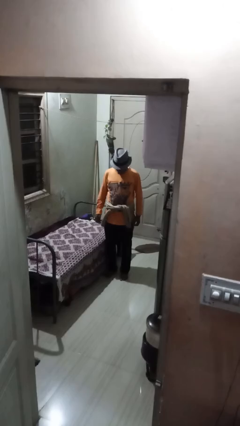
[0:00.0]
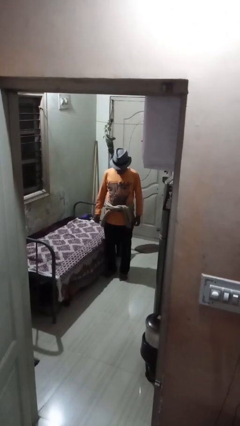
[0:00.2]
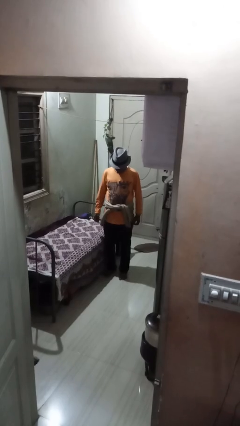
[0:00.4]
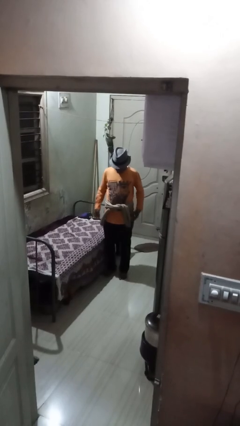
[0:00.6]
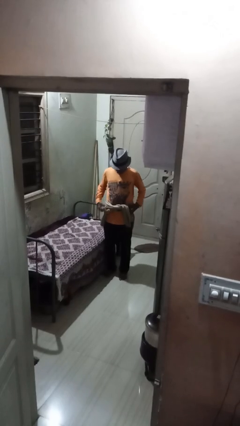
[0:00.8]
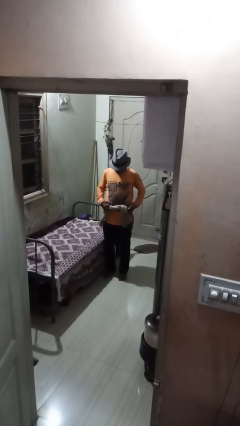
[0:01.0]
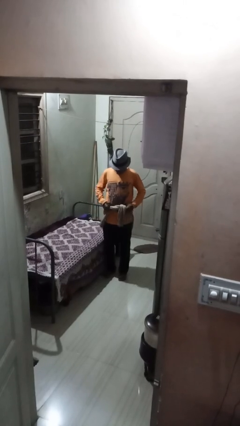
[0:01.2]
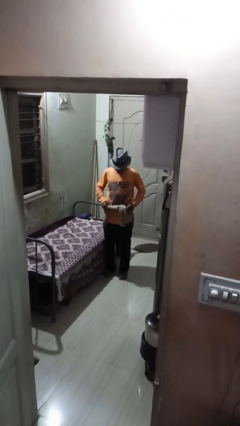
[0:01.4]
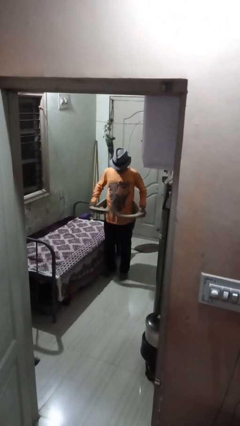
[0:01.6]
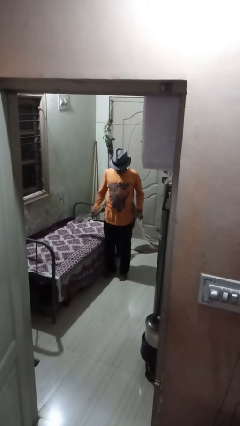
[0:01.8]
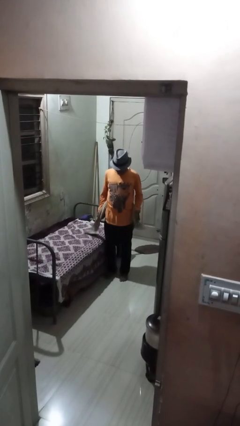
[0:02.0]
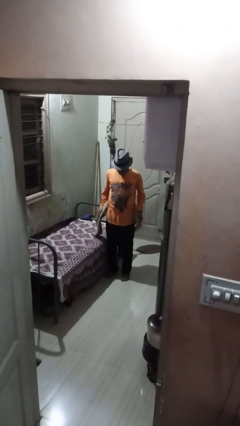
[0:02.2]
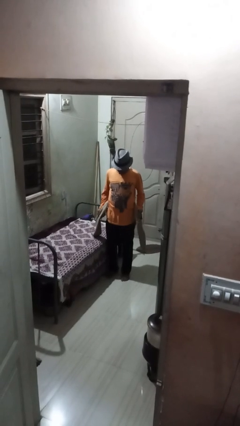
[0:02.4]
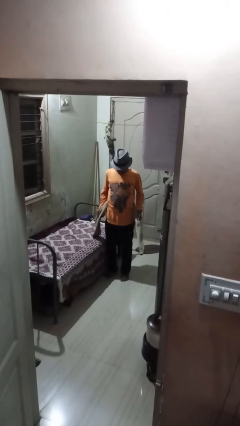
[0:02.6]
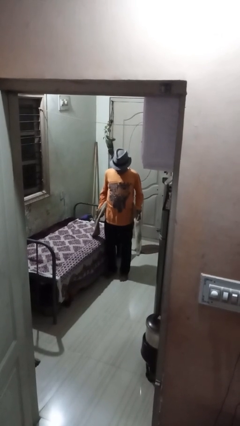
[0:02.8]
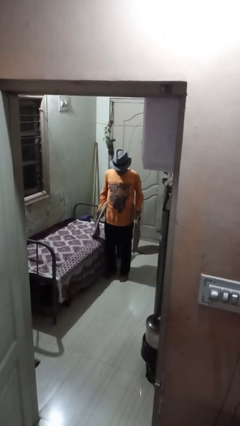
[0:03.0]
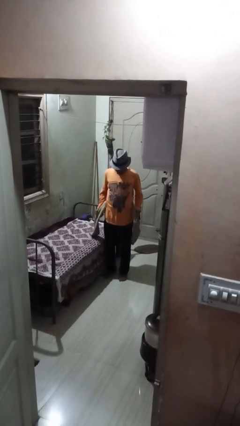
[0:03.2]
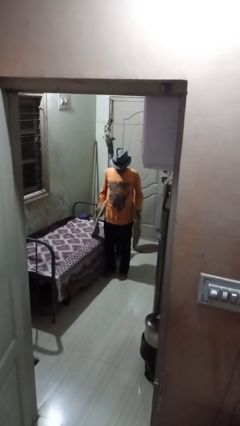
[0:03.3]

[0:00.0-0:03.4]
person unties jacket around waist

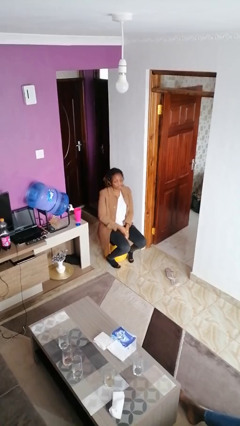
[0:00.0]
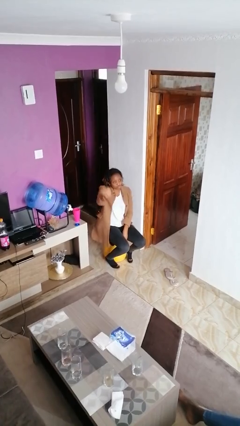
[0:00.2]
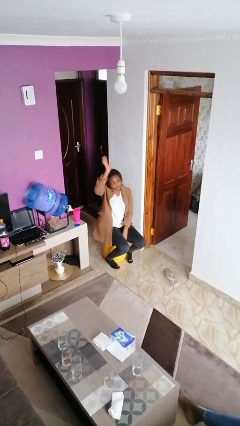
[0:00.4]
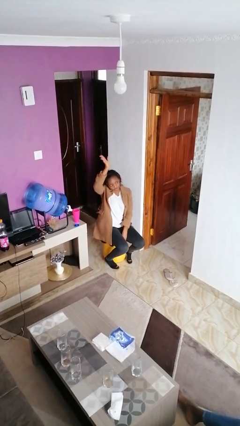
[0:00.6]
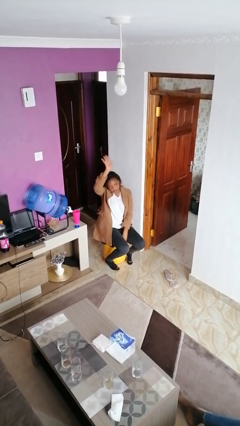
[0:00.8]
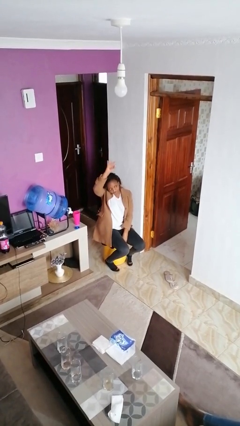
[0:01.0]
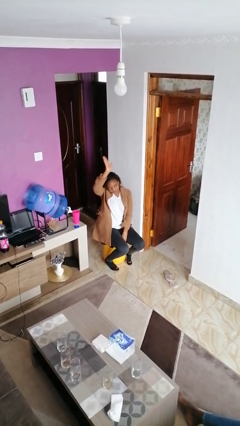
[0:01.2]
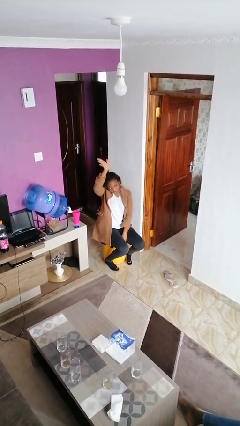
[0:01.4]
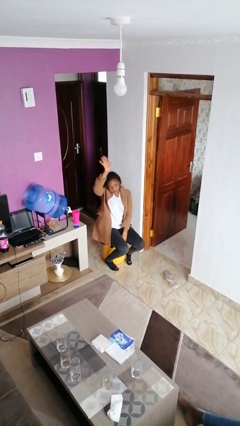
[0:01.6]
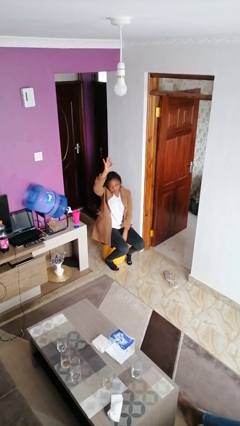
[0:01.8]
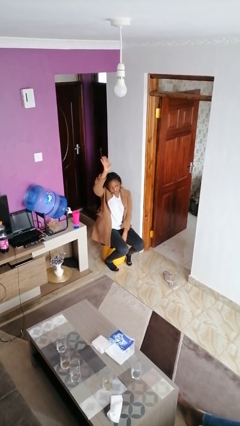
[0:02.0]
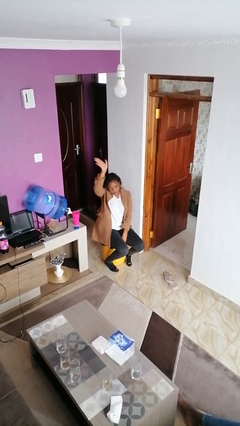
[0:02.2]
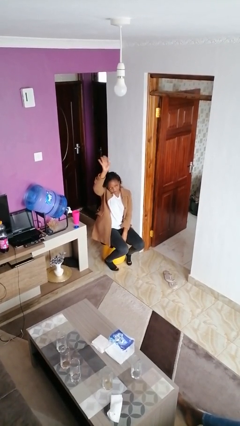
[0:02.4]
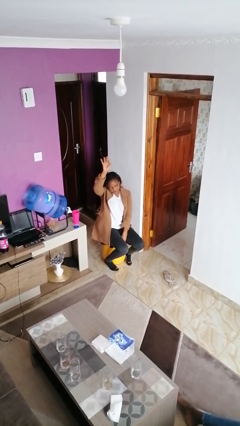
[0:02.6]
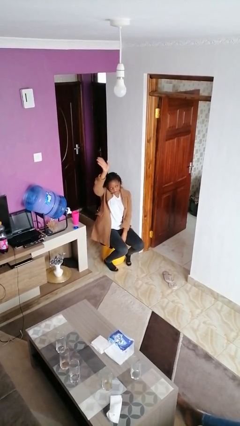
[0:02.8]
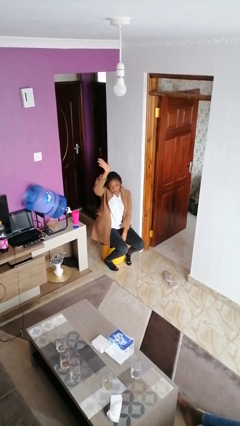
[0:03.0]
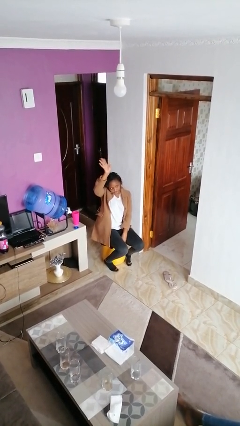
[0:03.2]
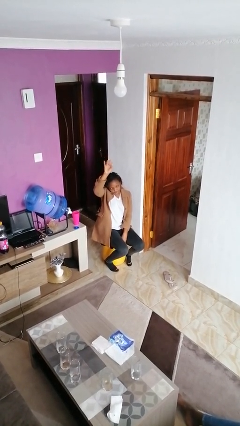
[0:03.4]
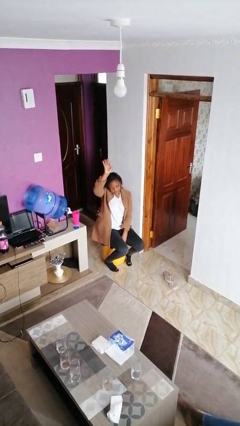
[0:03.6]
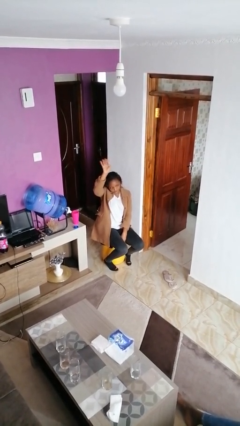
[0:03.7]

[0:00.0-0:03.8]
person gestures raise hand

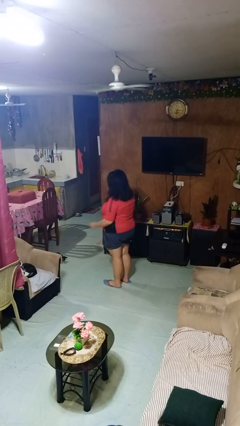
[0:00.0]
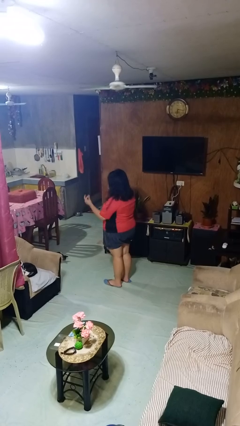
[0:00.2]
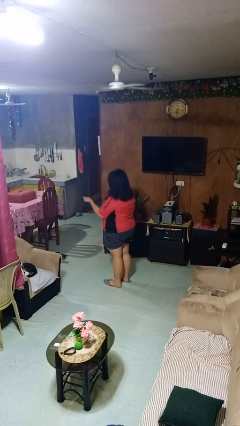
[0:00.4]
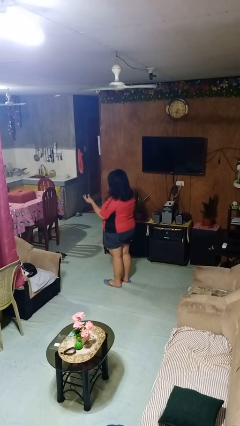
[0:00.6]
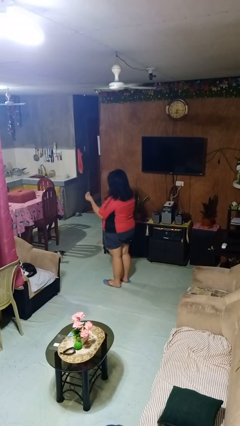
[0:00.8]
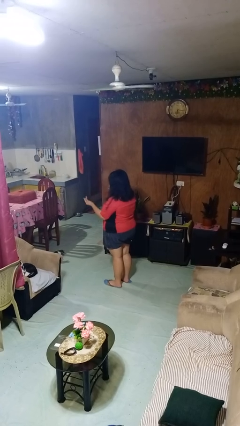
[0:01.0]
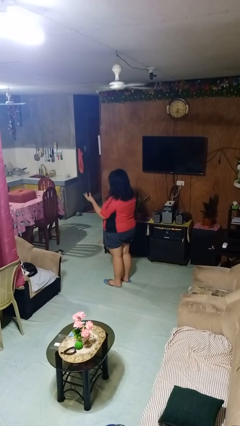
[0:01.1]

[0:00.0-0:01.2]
person snaps fingers

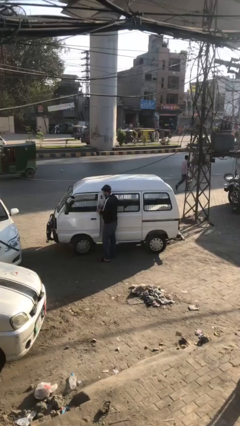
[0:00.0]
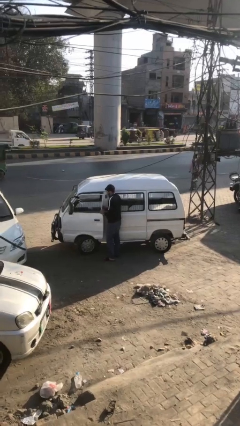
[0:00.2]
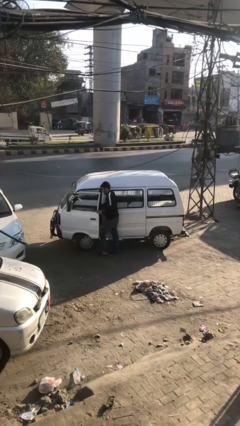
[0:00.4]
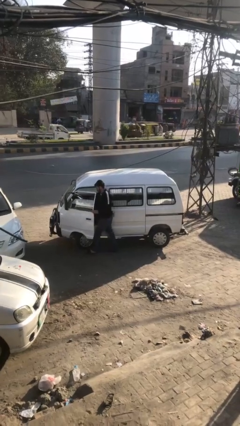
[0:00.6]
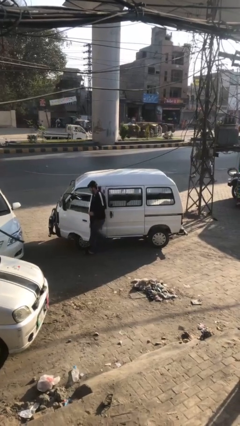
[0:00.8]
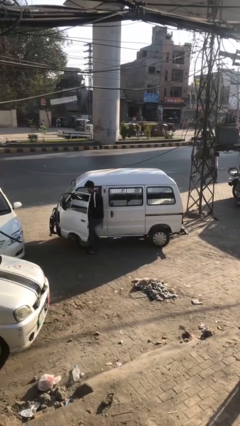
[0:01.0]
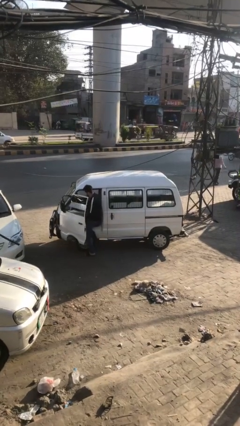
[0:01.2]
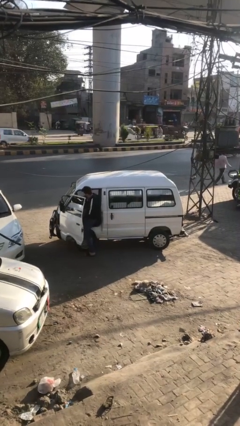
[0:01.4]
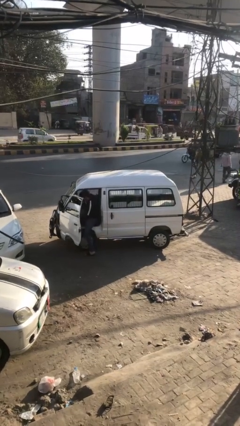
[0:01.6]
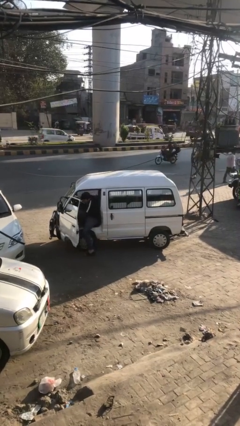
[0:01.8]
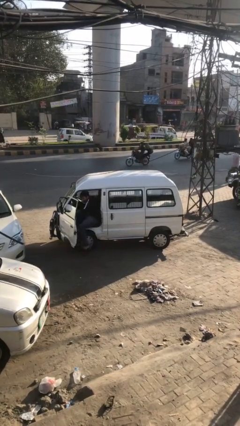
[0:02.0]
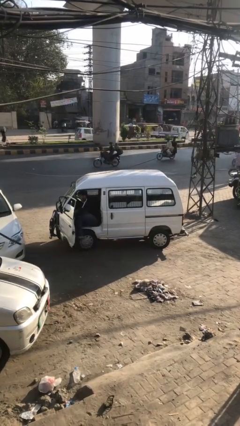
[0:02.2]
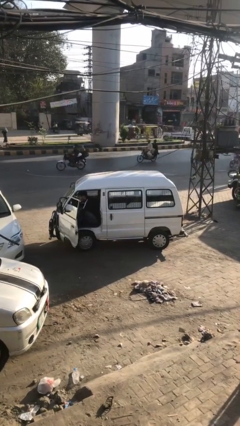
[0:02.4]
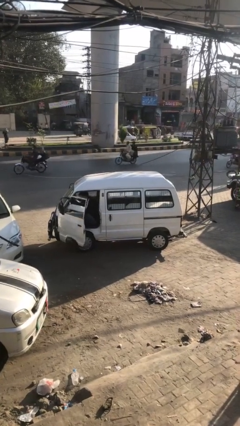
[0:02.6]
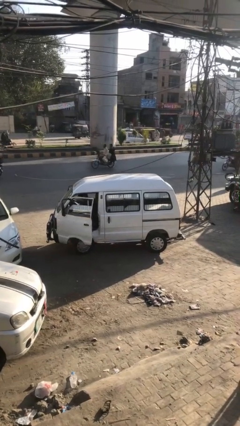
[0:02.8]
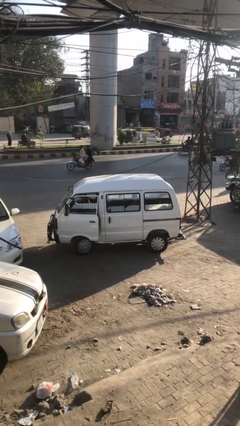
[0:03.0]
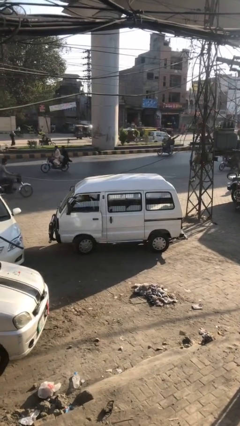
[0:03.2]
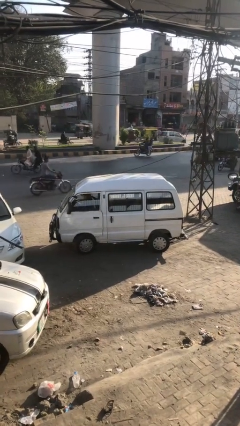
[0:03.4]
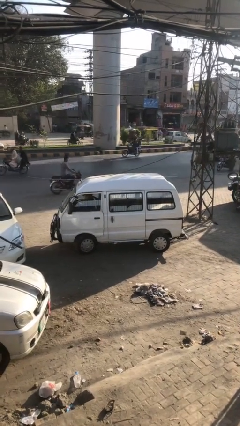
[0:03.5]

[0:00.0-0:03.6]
car picks up person

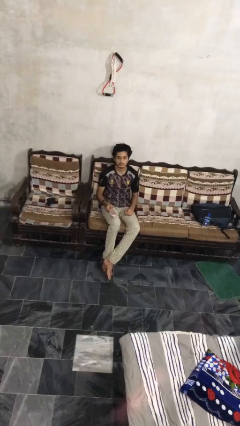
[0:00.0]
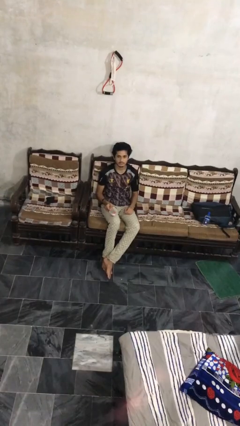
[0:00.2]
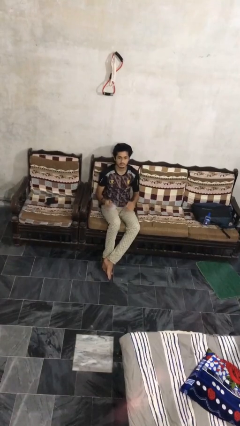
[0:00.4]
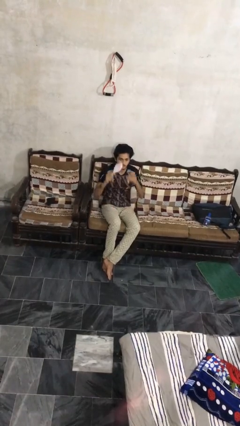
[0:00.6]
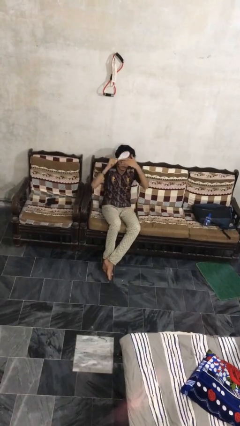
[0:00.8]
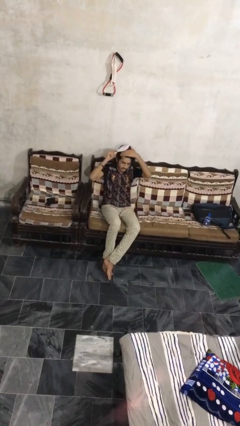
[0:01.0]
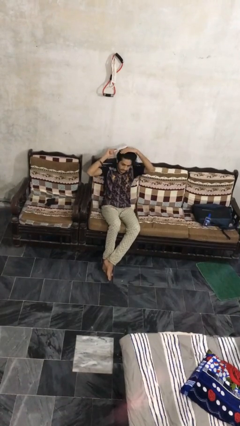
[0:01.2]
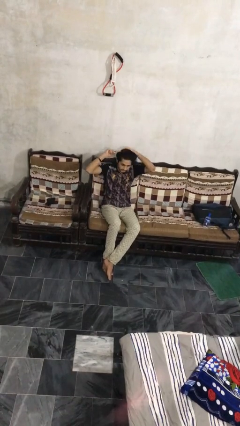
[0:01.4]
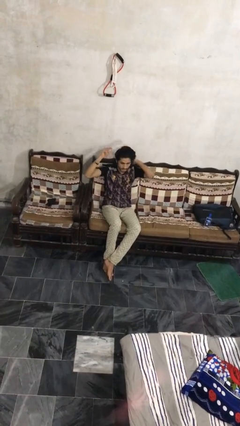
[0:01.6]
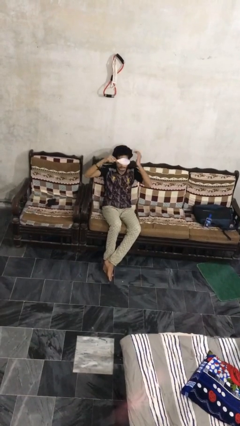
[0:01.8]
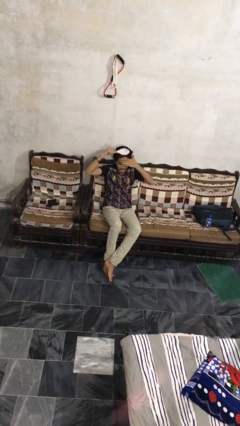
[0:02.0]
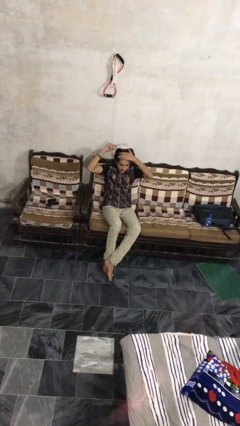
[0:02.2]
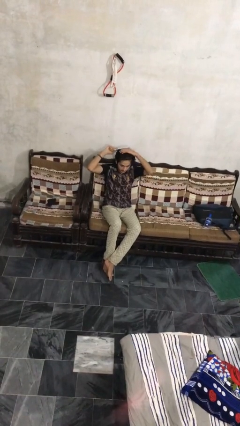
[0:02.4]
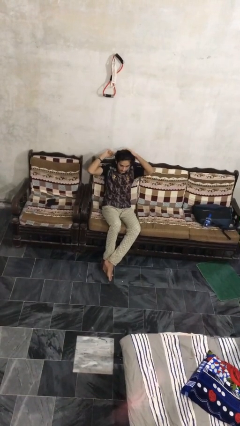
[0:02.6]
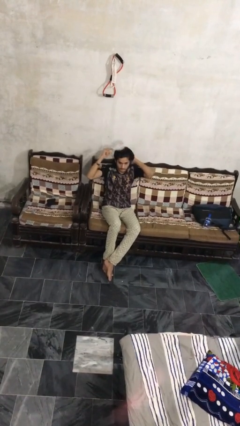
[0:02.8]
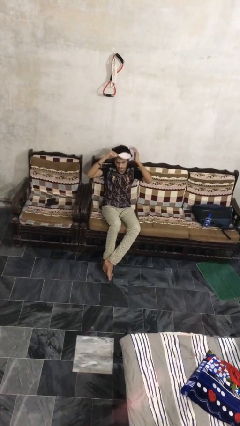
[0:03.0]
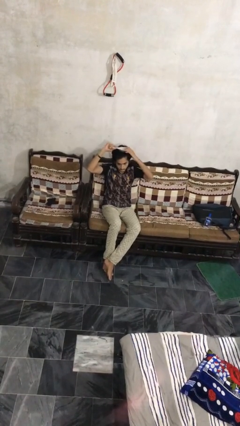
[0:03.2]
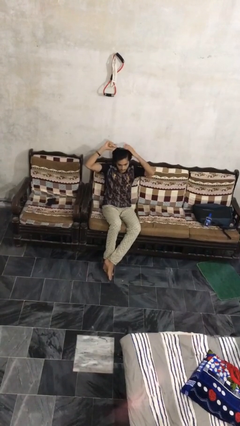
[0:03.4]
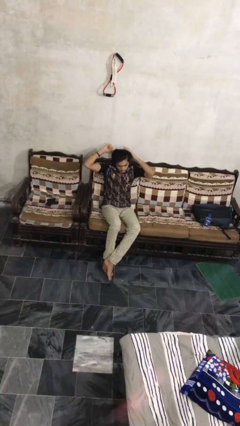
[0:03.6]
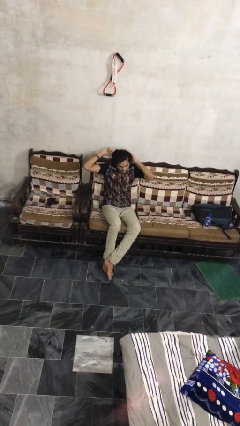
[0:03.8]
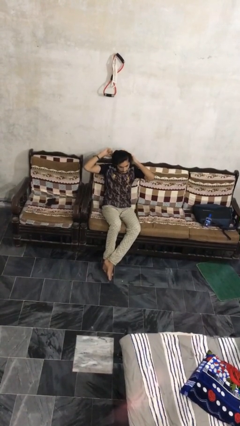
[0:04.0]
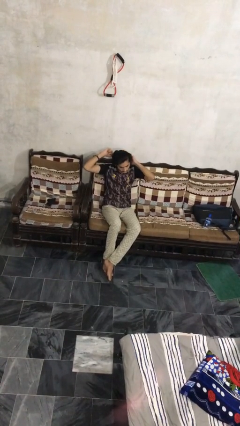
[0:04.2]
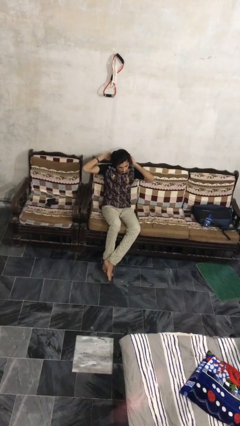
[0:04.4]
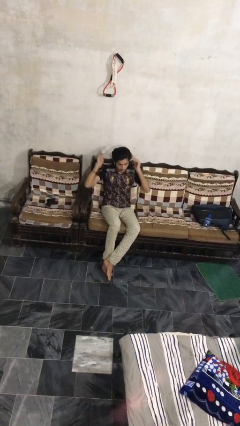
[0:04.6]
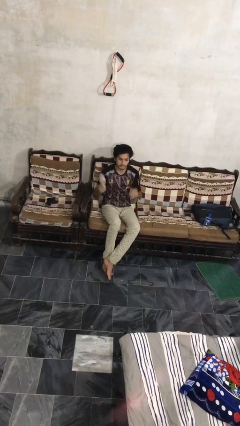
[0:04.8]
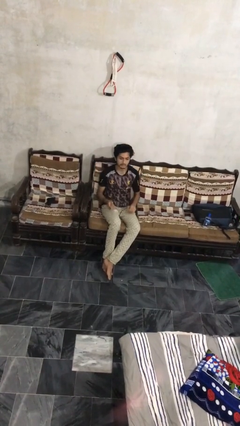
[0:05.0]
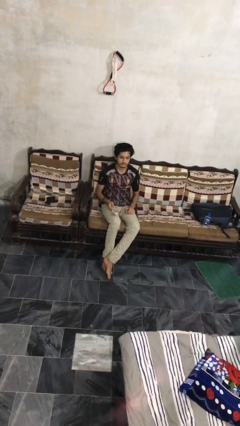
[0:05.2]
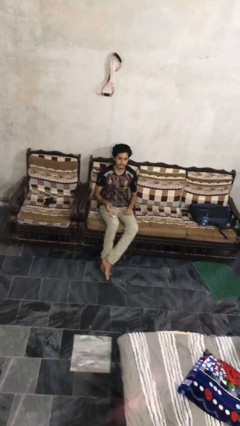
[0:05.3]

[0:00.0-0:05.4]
person brushes hair
